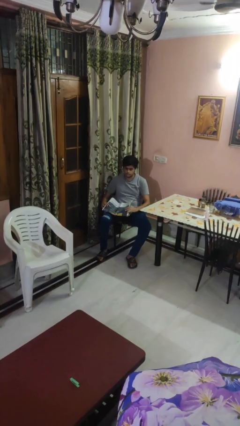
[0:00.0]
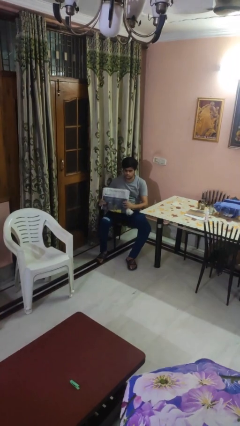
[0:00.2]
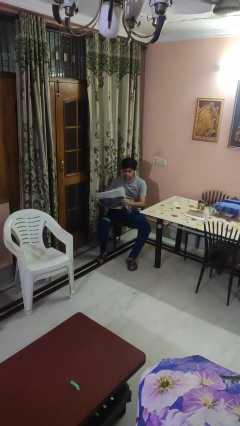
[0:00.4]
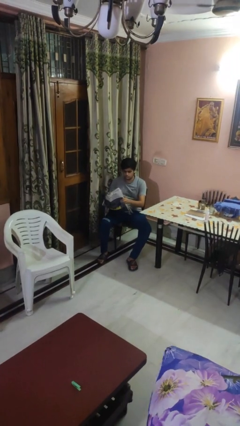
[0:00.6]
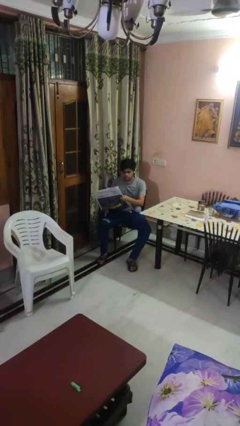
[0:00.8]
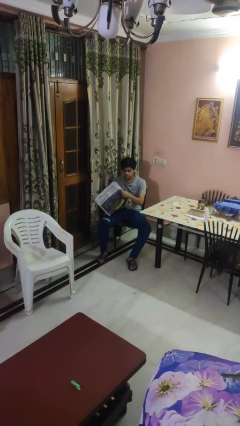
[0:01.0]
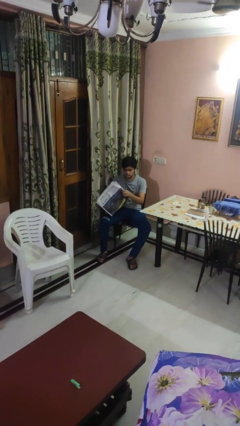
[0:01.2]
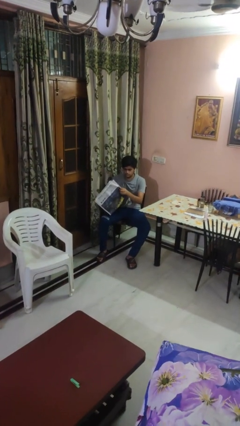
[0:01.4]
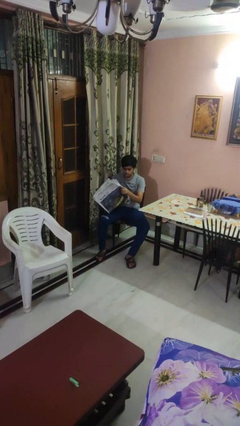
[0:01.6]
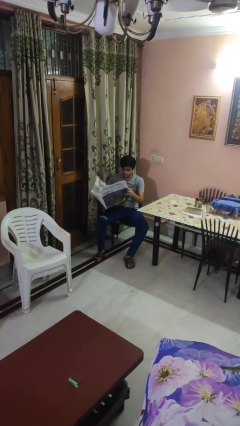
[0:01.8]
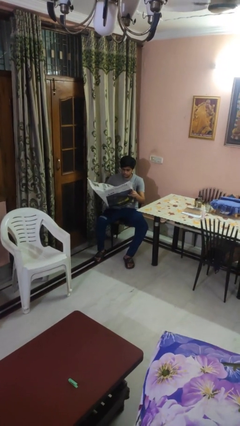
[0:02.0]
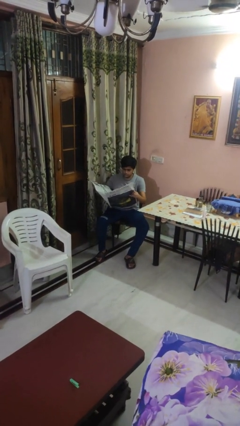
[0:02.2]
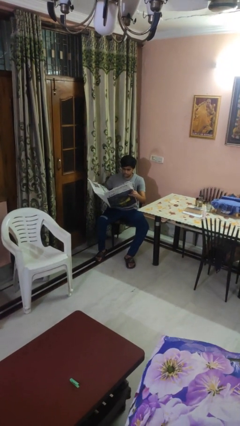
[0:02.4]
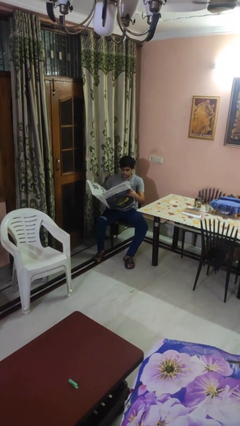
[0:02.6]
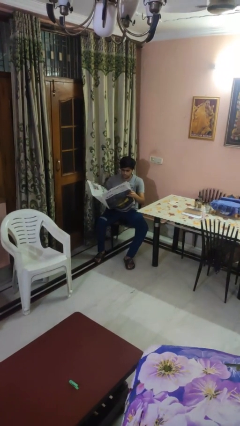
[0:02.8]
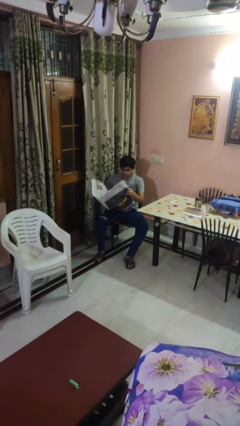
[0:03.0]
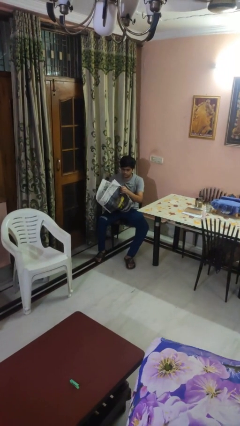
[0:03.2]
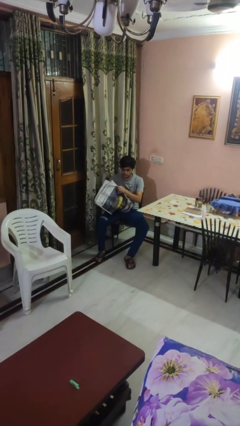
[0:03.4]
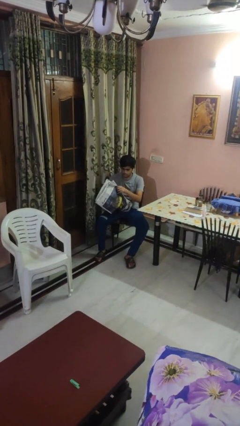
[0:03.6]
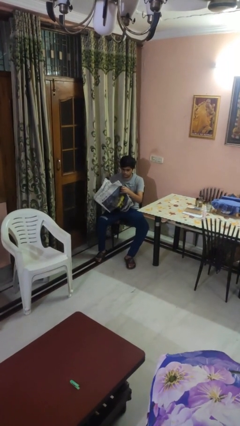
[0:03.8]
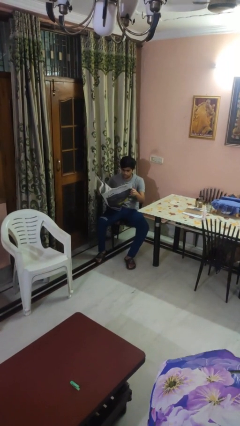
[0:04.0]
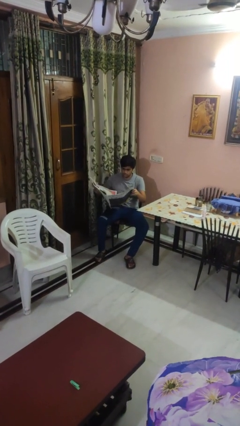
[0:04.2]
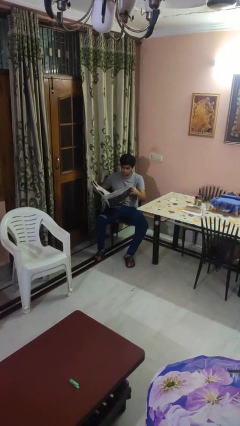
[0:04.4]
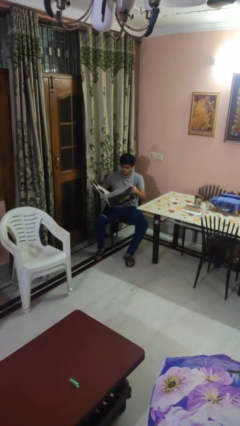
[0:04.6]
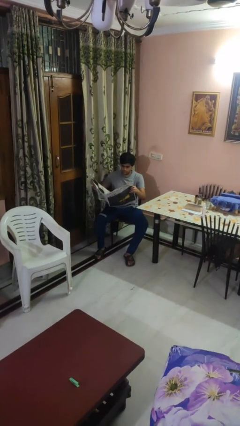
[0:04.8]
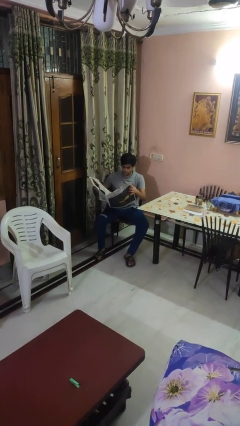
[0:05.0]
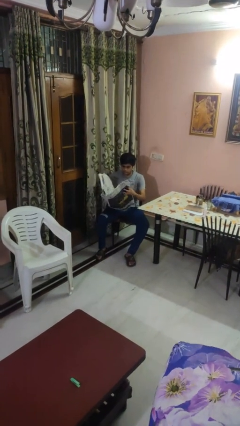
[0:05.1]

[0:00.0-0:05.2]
person reads newspaper

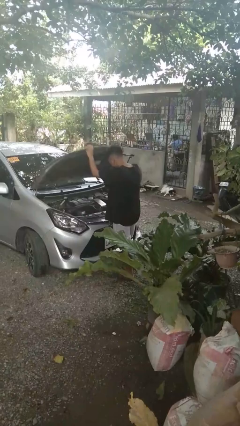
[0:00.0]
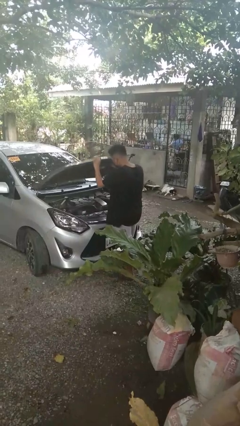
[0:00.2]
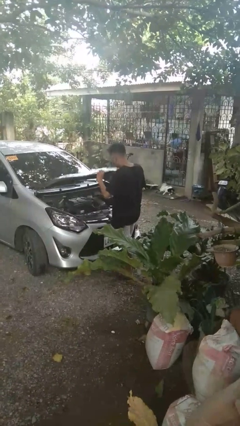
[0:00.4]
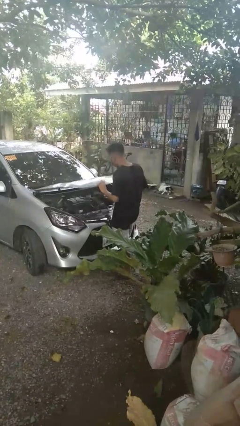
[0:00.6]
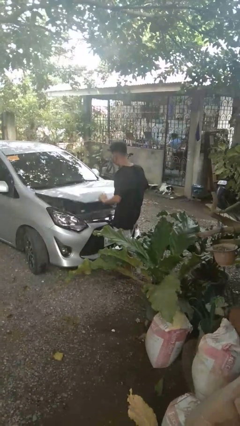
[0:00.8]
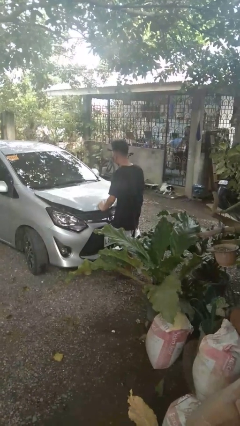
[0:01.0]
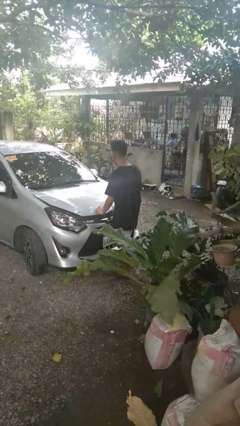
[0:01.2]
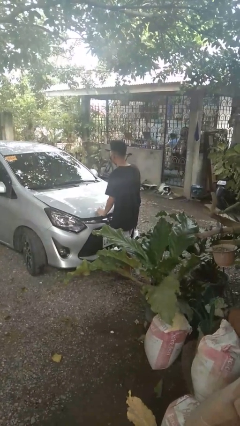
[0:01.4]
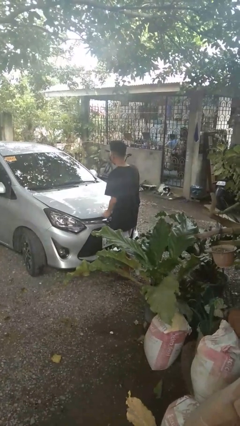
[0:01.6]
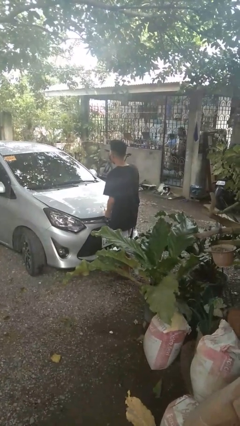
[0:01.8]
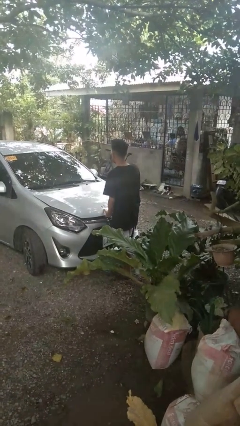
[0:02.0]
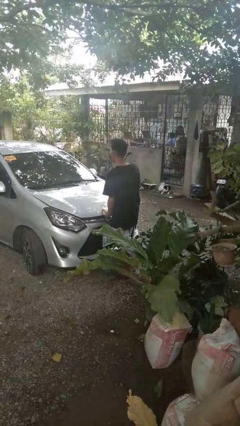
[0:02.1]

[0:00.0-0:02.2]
person closes car hood

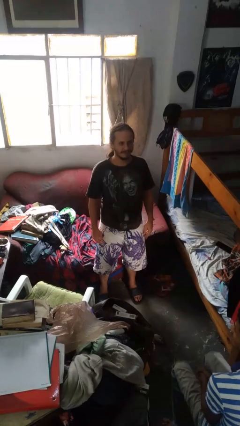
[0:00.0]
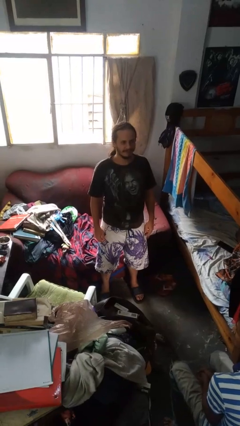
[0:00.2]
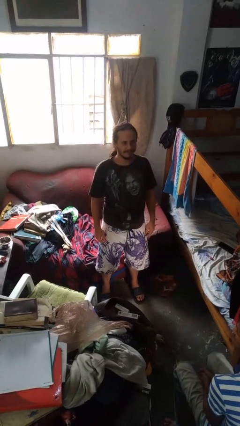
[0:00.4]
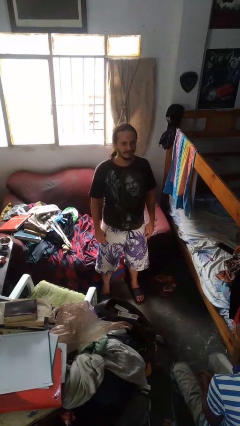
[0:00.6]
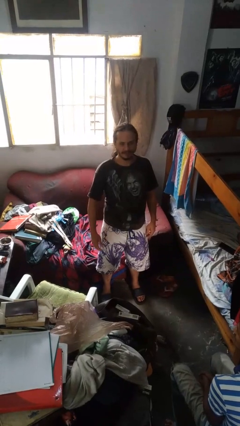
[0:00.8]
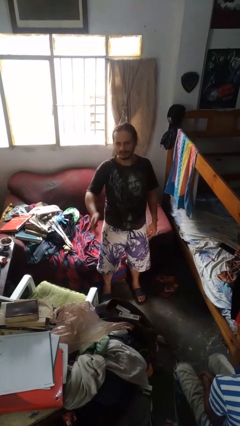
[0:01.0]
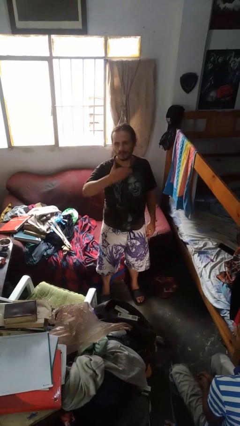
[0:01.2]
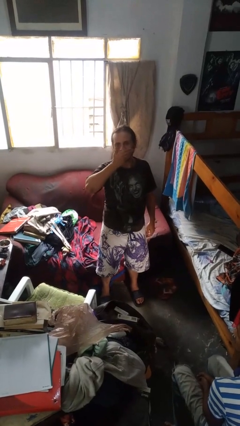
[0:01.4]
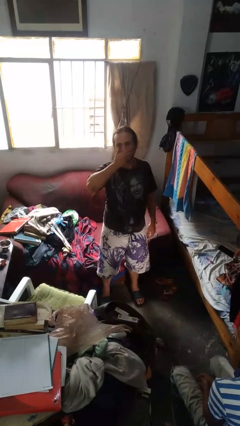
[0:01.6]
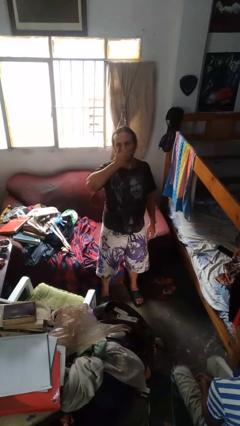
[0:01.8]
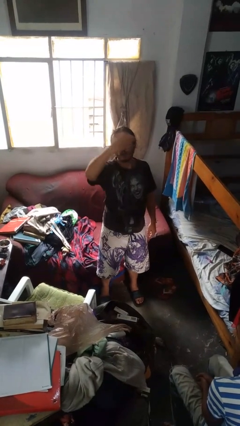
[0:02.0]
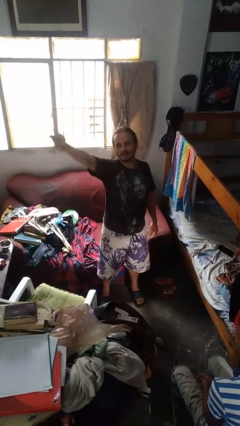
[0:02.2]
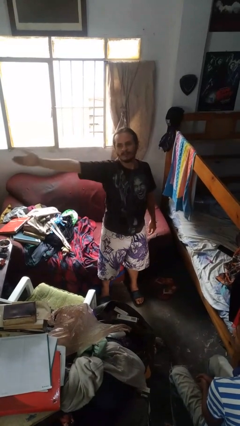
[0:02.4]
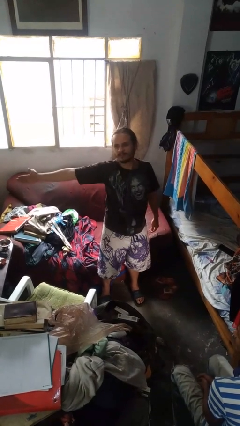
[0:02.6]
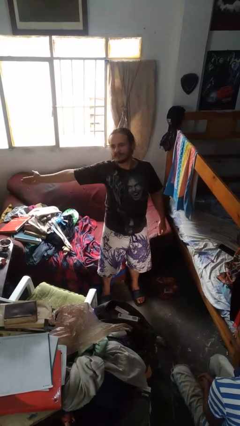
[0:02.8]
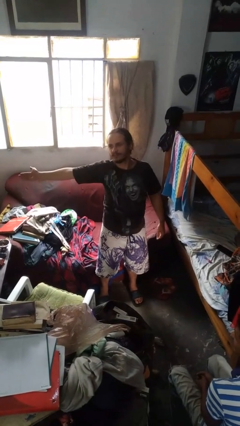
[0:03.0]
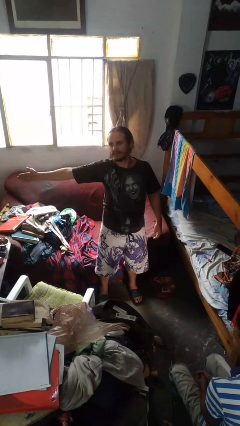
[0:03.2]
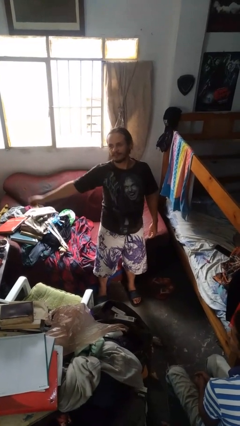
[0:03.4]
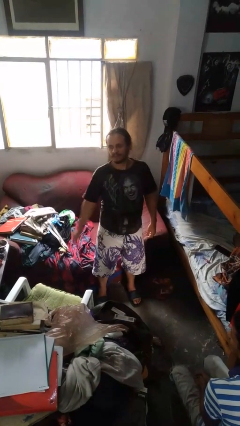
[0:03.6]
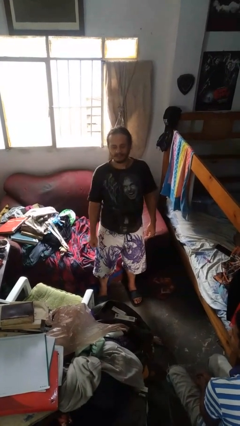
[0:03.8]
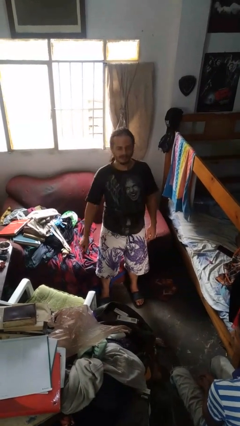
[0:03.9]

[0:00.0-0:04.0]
person gestures blow kiss

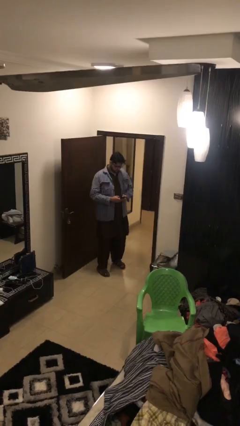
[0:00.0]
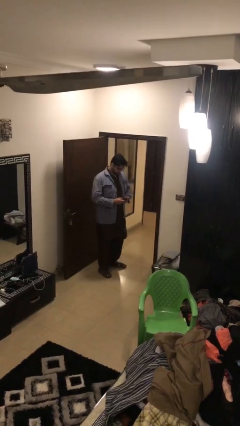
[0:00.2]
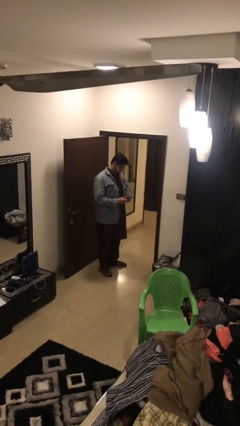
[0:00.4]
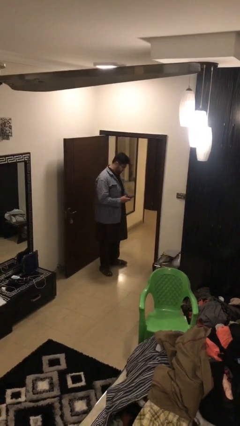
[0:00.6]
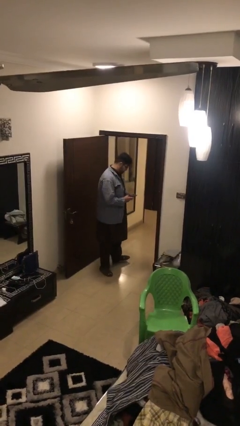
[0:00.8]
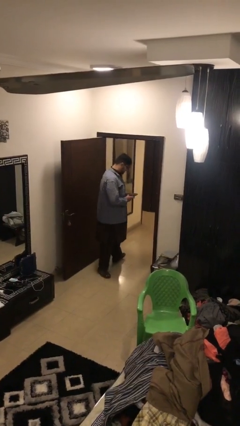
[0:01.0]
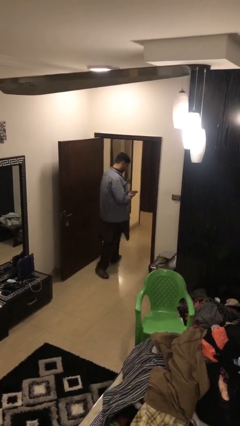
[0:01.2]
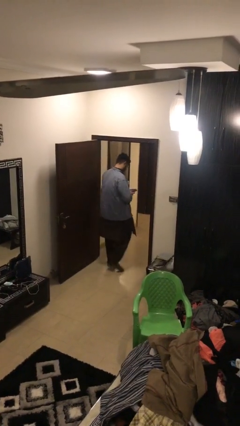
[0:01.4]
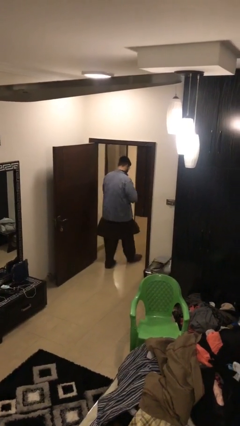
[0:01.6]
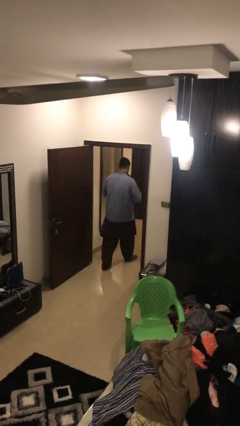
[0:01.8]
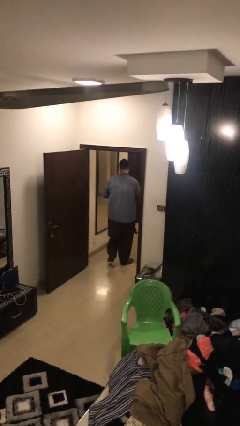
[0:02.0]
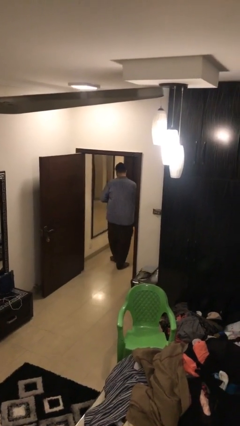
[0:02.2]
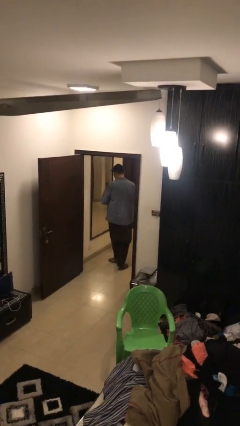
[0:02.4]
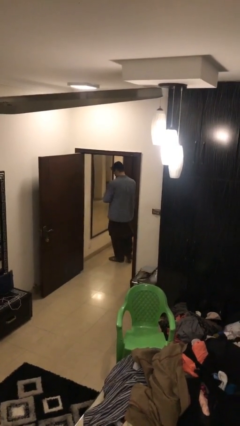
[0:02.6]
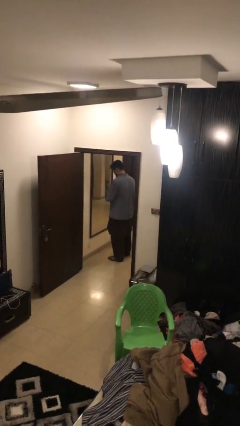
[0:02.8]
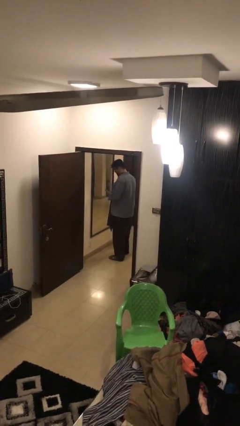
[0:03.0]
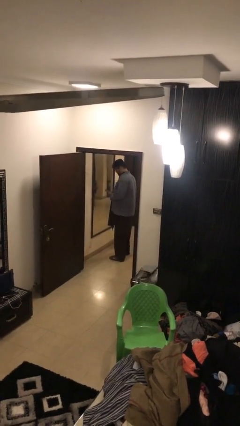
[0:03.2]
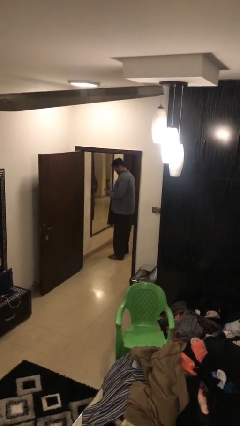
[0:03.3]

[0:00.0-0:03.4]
person exits scene through structure

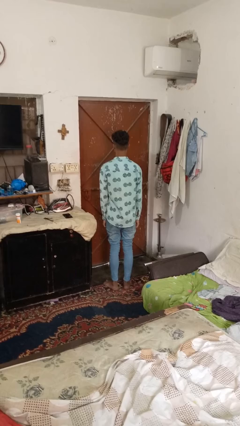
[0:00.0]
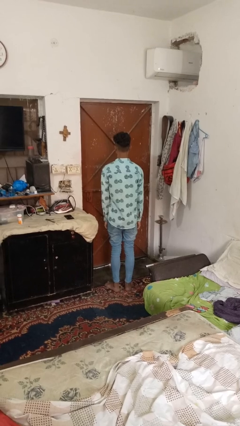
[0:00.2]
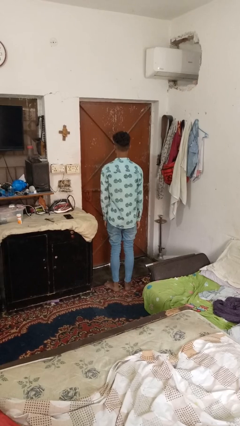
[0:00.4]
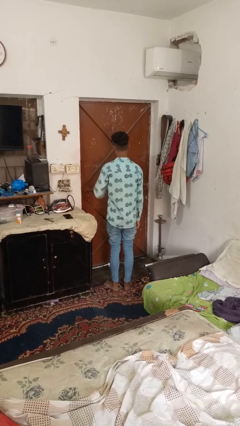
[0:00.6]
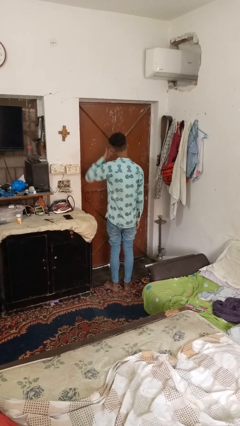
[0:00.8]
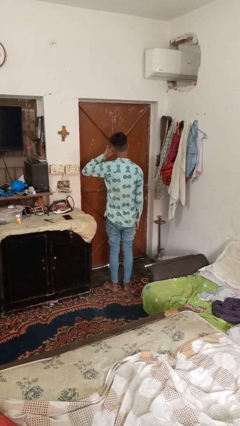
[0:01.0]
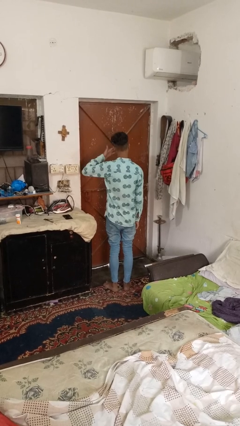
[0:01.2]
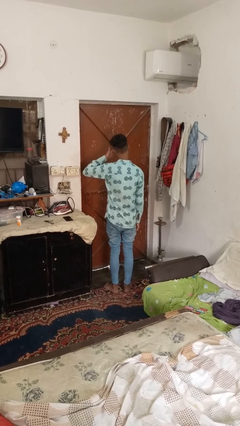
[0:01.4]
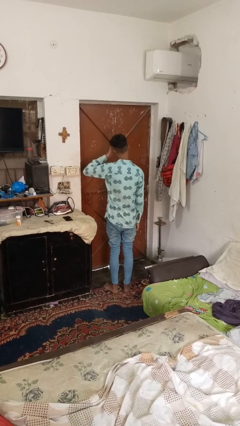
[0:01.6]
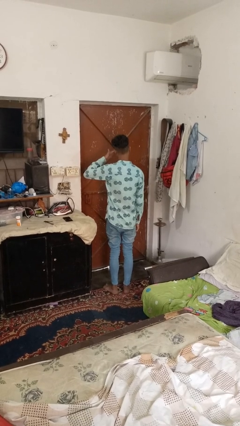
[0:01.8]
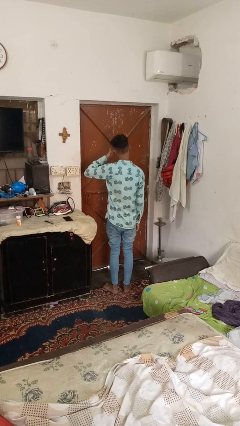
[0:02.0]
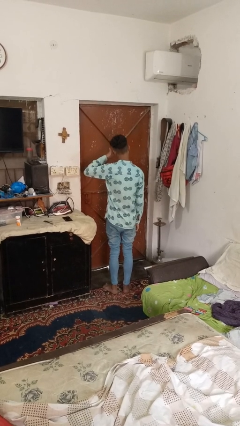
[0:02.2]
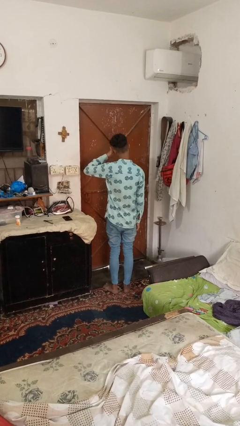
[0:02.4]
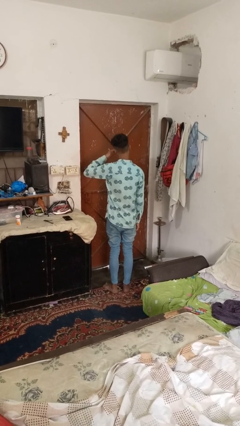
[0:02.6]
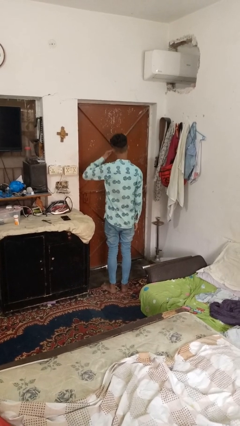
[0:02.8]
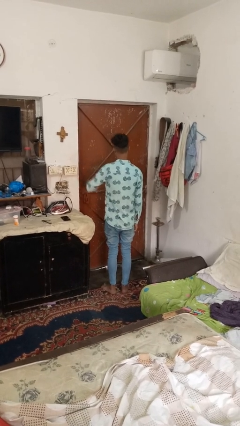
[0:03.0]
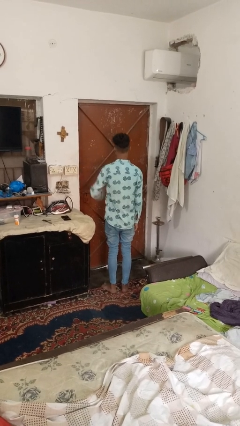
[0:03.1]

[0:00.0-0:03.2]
person rubs eyes
